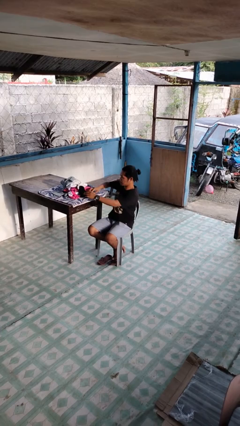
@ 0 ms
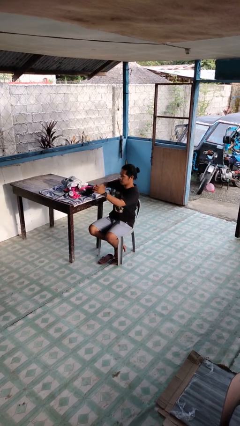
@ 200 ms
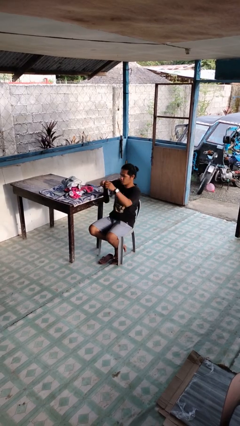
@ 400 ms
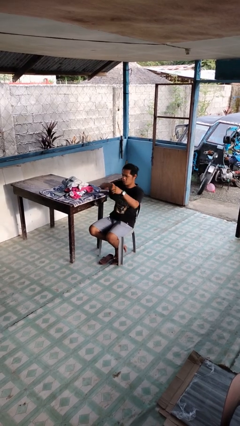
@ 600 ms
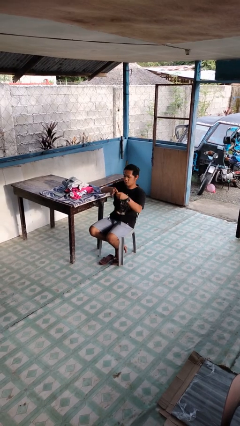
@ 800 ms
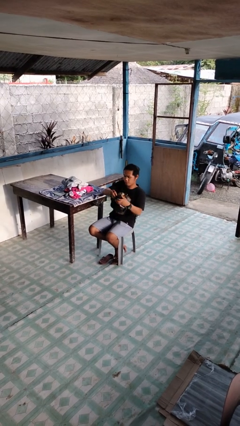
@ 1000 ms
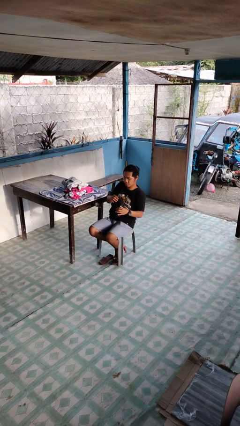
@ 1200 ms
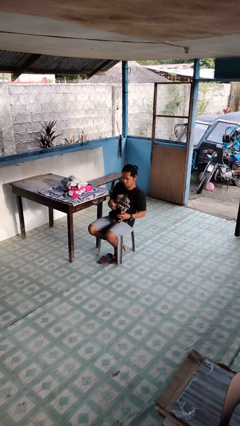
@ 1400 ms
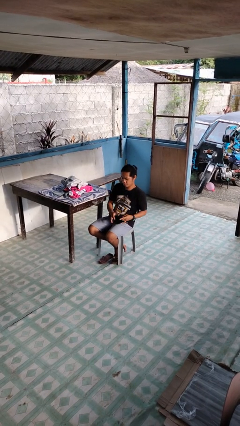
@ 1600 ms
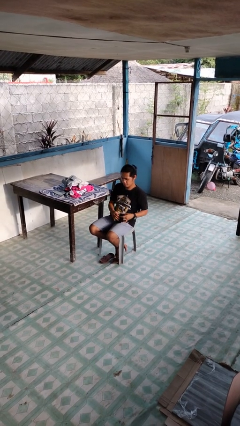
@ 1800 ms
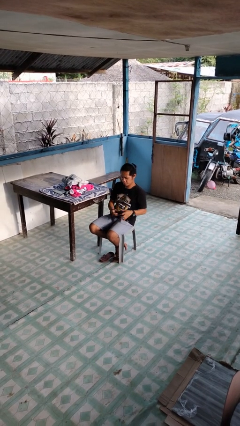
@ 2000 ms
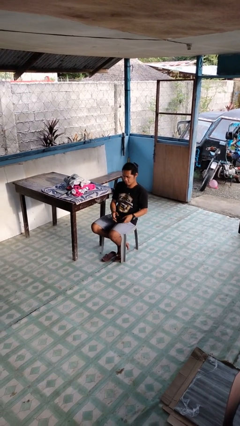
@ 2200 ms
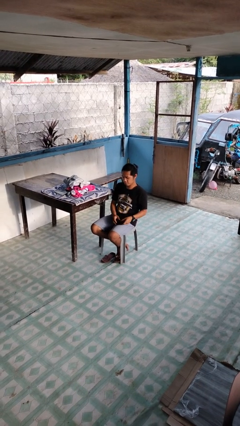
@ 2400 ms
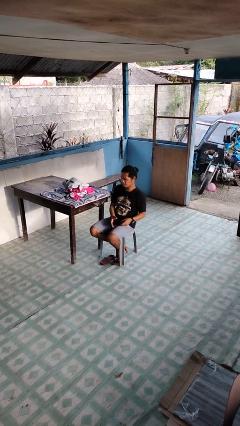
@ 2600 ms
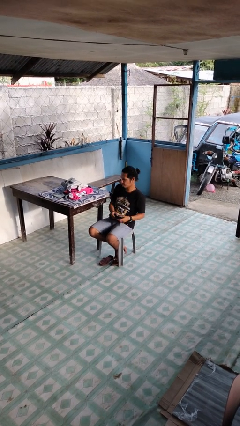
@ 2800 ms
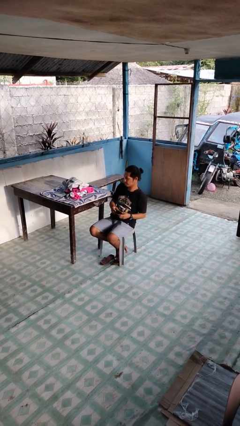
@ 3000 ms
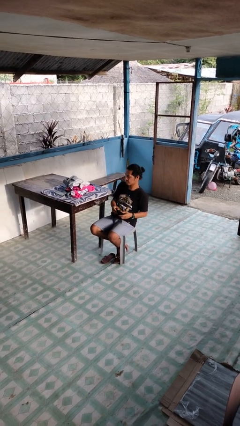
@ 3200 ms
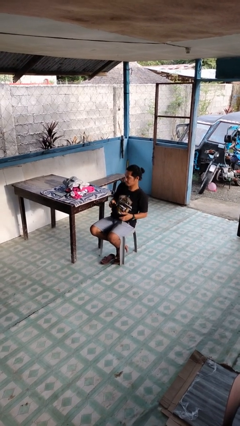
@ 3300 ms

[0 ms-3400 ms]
person folds socks

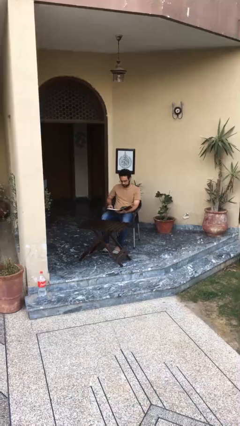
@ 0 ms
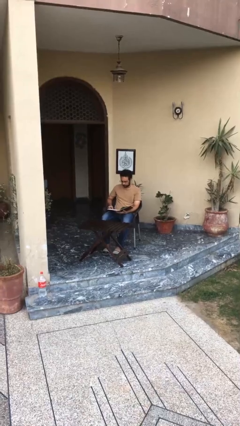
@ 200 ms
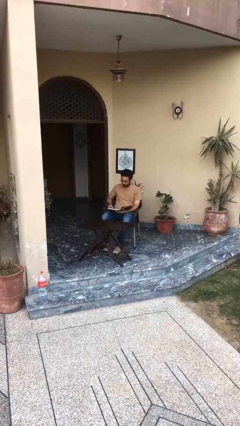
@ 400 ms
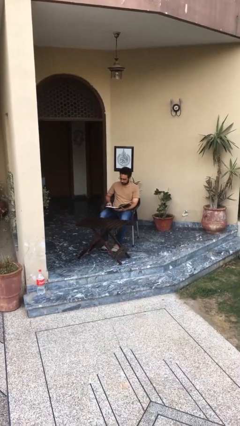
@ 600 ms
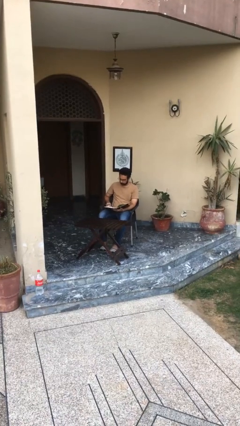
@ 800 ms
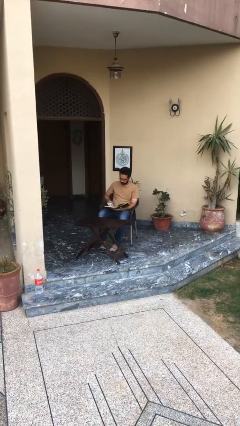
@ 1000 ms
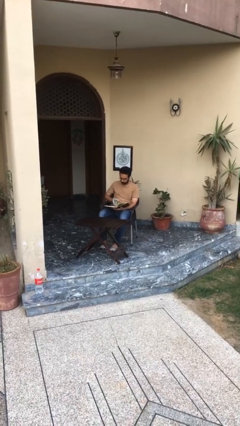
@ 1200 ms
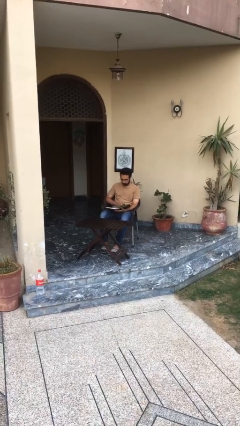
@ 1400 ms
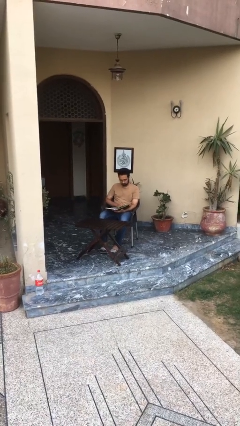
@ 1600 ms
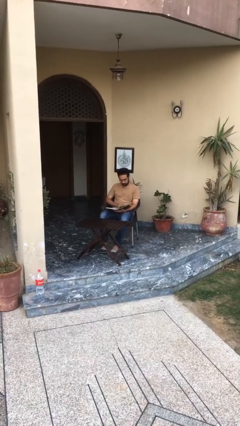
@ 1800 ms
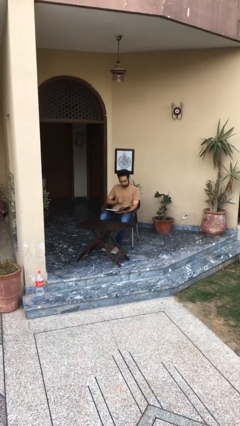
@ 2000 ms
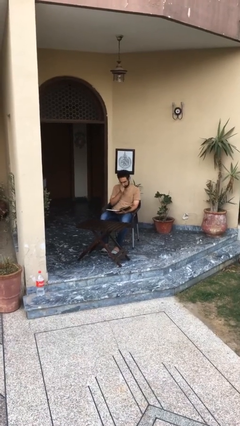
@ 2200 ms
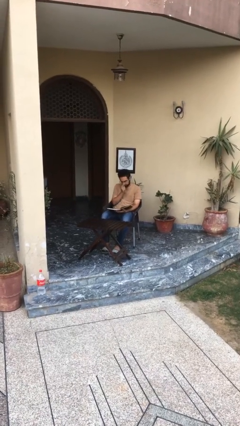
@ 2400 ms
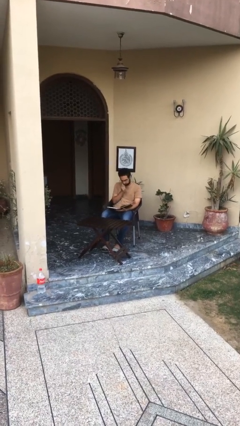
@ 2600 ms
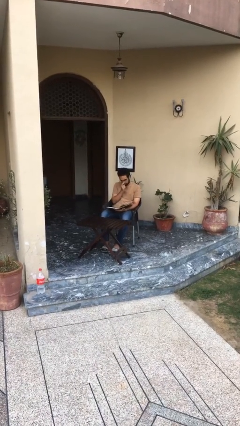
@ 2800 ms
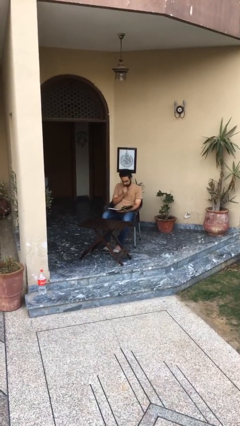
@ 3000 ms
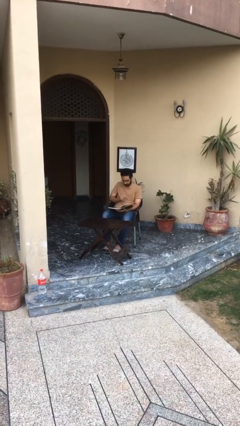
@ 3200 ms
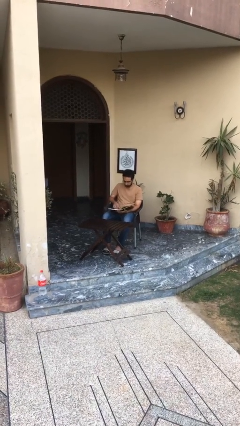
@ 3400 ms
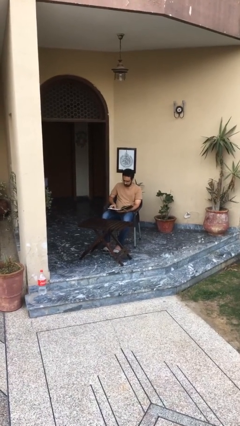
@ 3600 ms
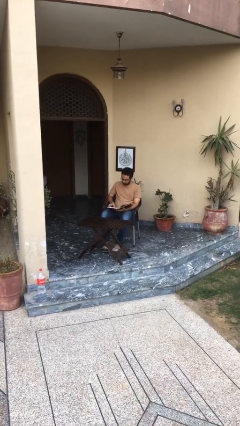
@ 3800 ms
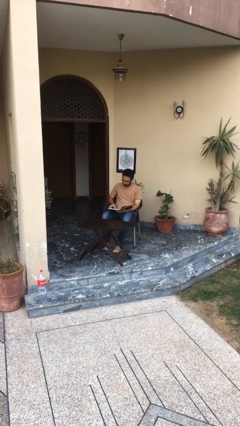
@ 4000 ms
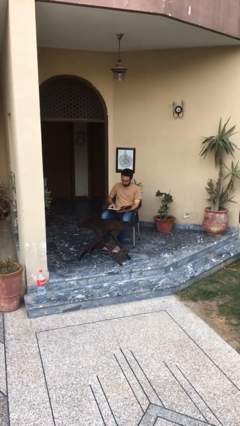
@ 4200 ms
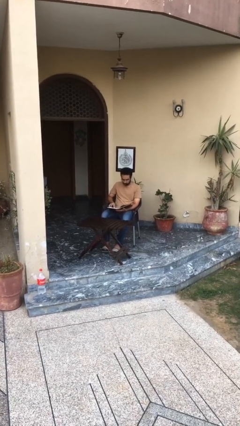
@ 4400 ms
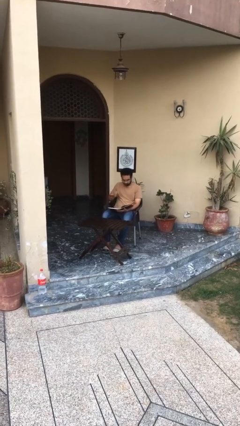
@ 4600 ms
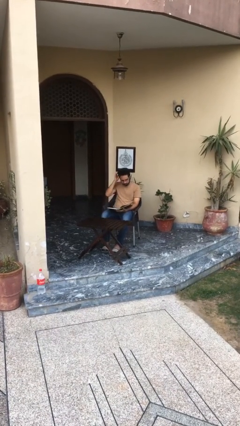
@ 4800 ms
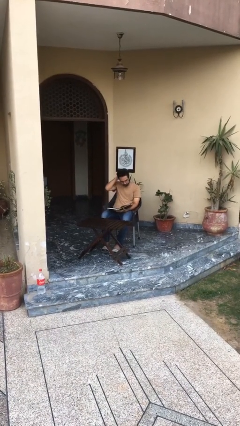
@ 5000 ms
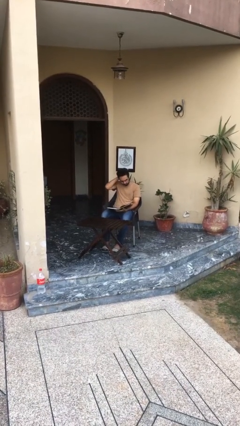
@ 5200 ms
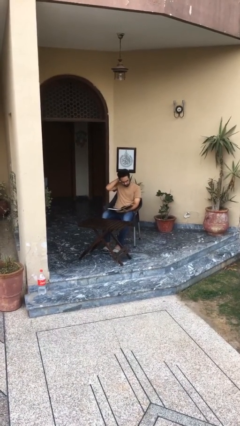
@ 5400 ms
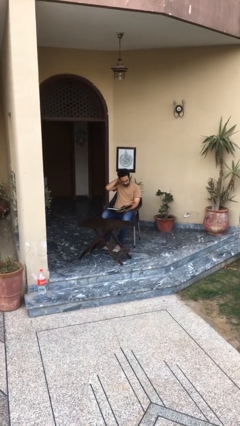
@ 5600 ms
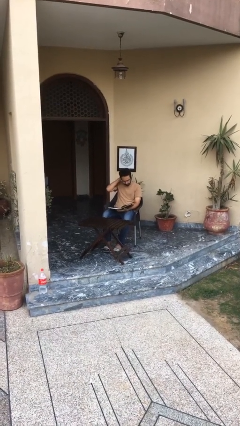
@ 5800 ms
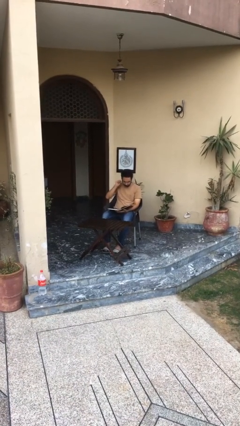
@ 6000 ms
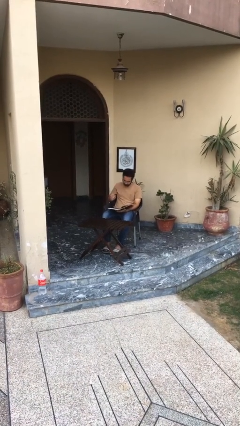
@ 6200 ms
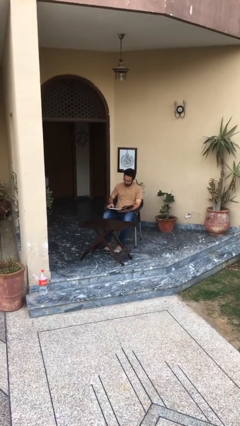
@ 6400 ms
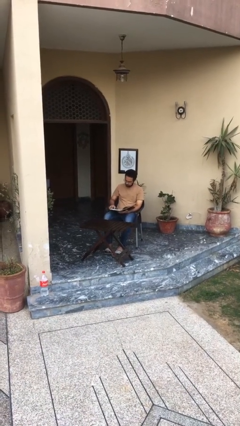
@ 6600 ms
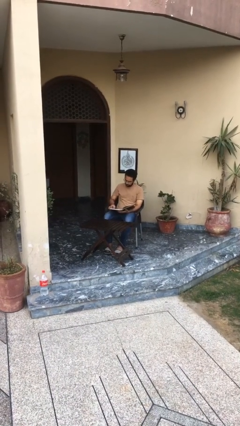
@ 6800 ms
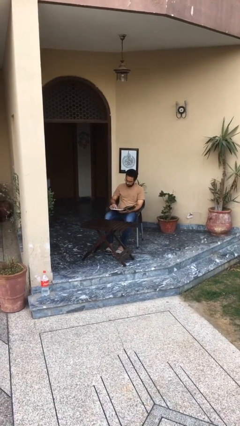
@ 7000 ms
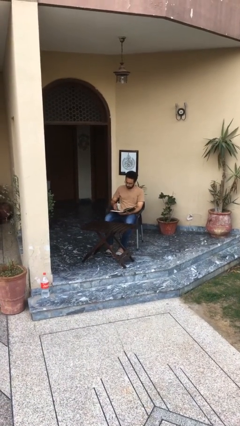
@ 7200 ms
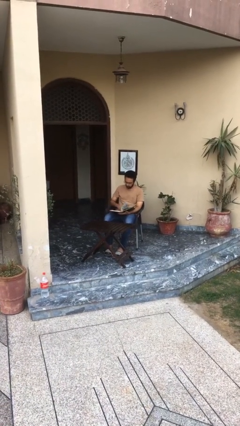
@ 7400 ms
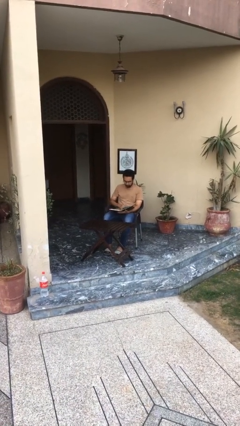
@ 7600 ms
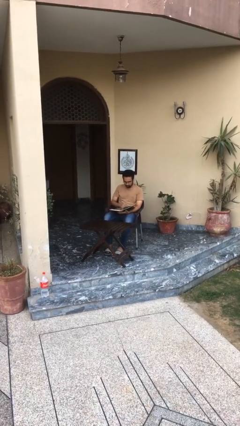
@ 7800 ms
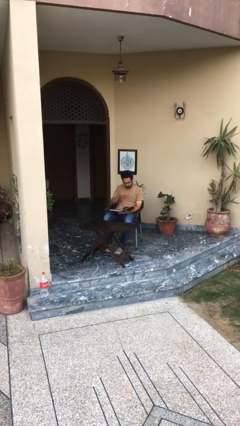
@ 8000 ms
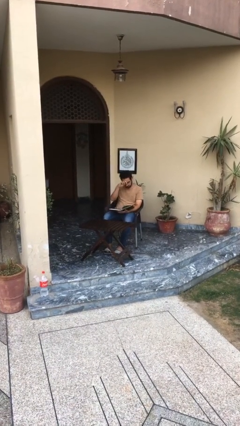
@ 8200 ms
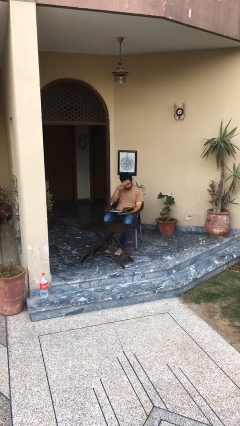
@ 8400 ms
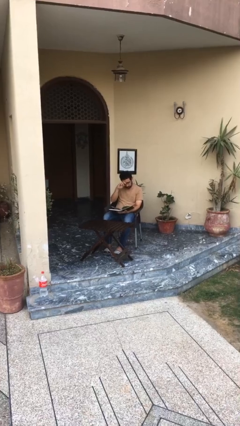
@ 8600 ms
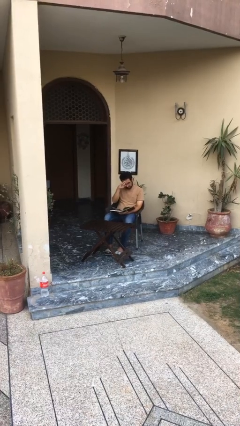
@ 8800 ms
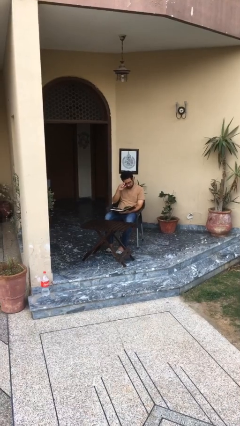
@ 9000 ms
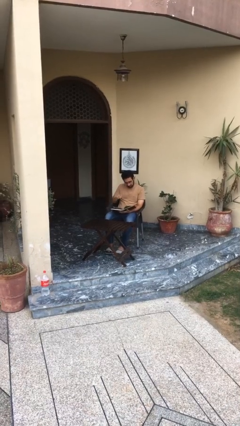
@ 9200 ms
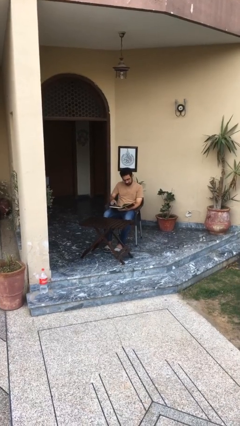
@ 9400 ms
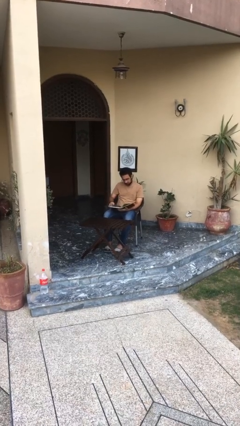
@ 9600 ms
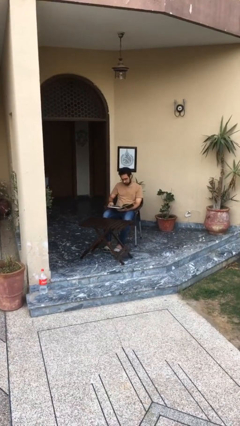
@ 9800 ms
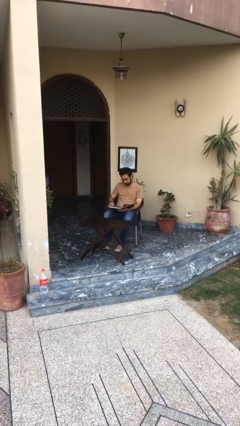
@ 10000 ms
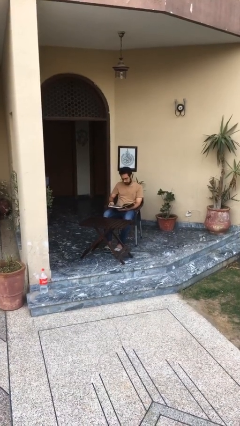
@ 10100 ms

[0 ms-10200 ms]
person reads document

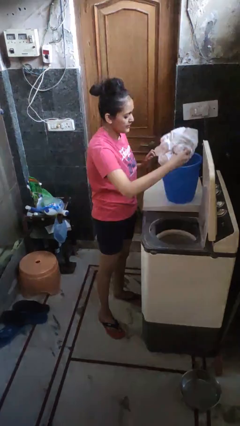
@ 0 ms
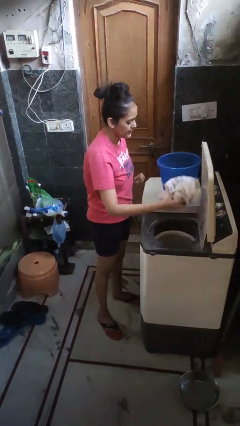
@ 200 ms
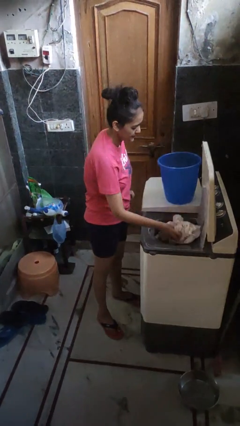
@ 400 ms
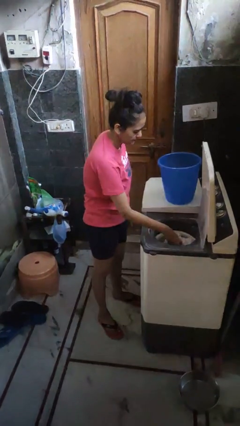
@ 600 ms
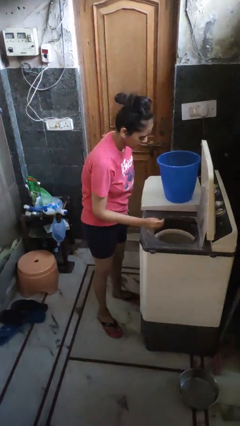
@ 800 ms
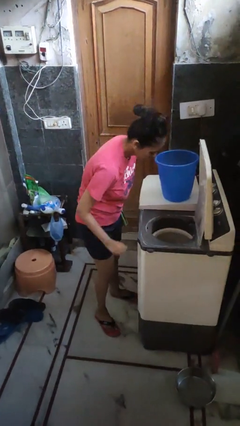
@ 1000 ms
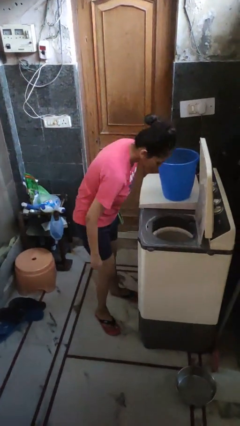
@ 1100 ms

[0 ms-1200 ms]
person puts clothes into dresser

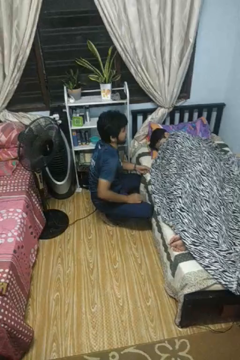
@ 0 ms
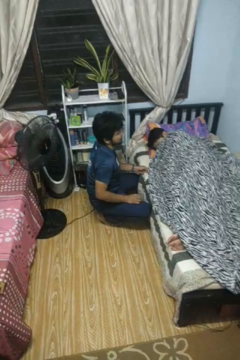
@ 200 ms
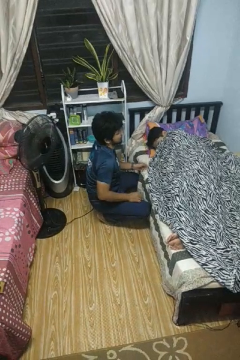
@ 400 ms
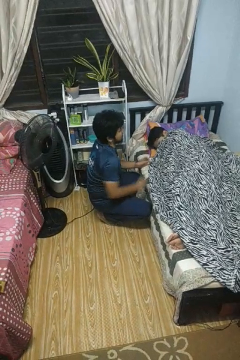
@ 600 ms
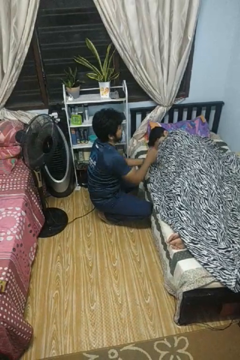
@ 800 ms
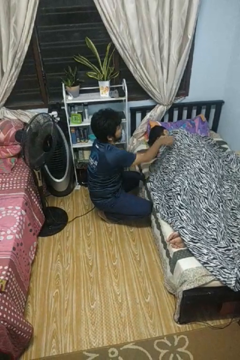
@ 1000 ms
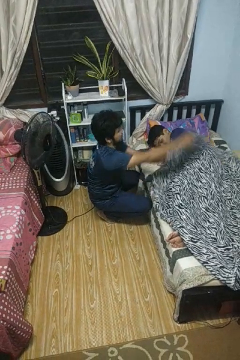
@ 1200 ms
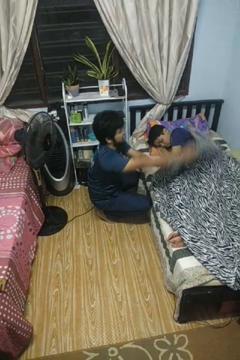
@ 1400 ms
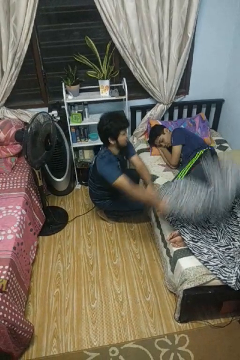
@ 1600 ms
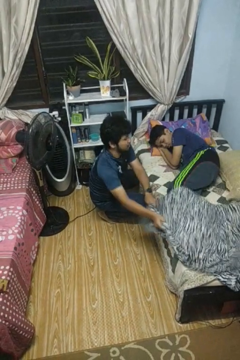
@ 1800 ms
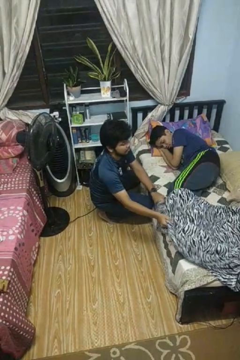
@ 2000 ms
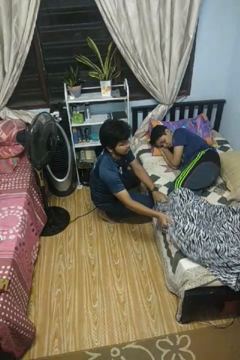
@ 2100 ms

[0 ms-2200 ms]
person uncovers friend with blanket

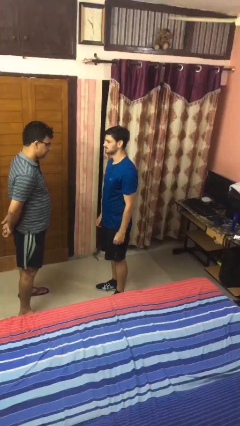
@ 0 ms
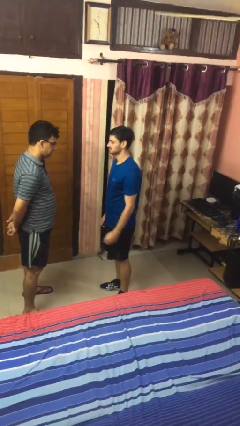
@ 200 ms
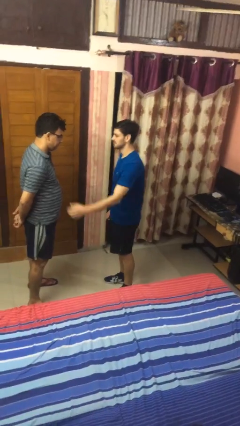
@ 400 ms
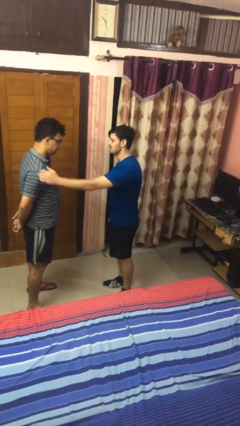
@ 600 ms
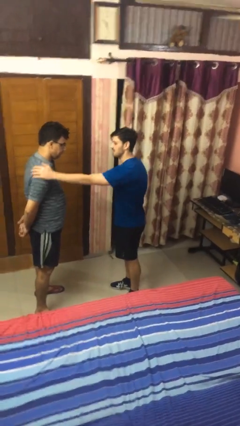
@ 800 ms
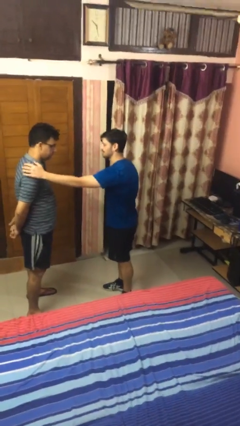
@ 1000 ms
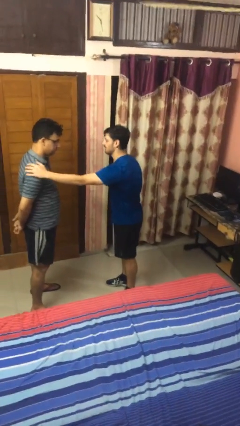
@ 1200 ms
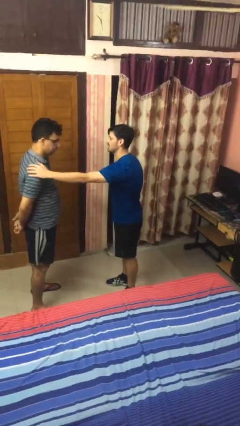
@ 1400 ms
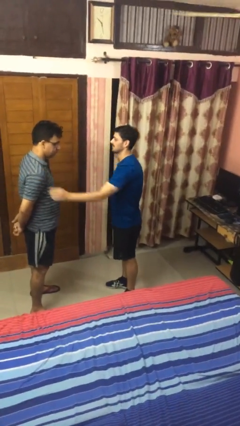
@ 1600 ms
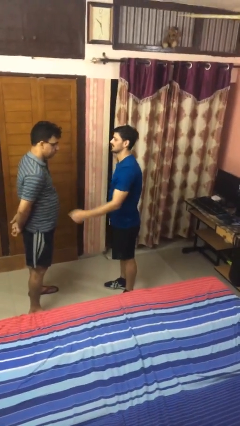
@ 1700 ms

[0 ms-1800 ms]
person pounds shoulders of person
